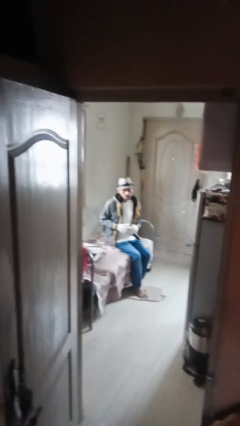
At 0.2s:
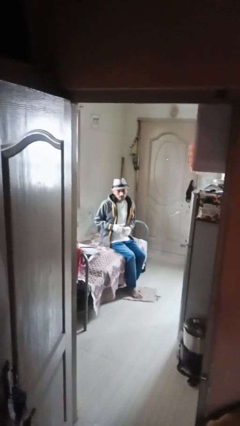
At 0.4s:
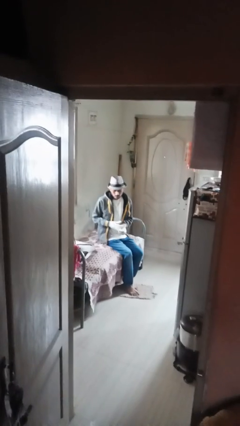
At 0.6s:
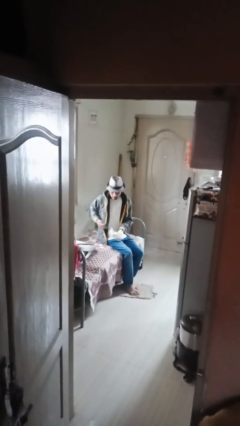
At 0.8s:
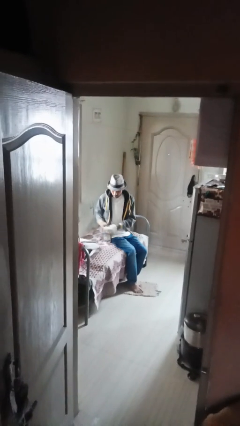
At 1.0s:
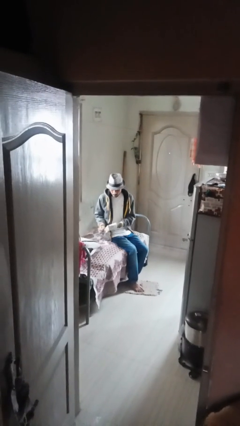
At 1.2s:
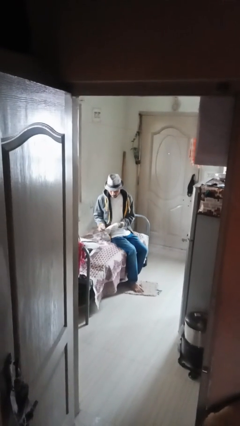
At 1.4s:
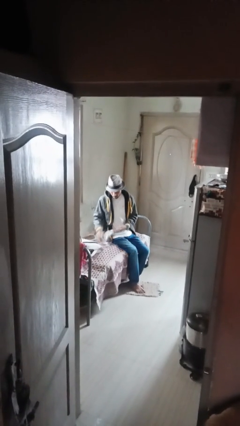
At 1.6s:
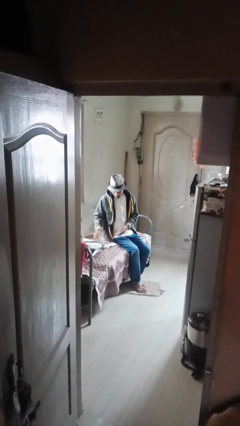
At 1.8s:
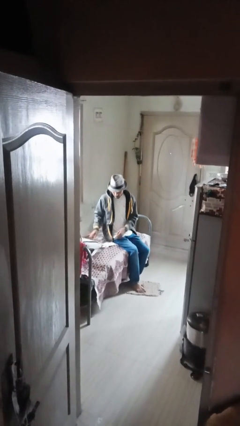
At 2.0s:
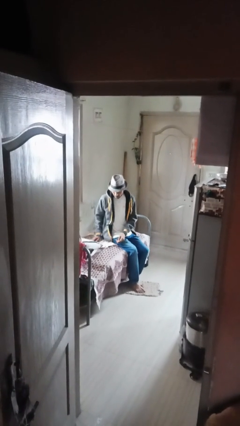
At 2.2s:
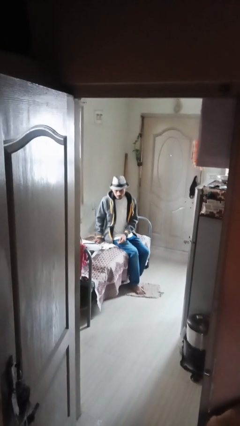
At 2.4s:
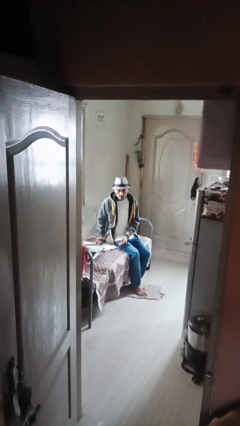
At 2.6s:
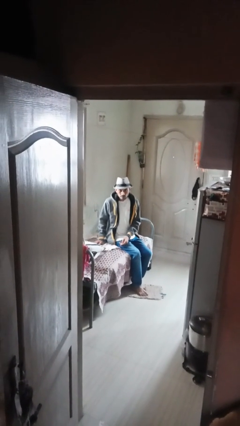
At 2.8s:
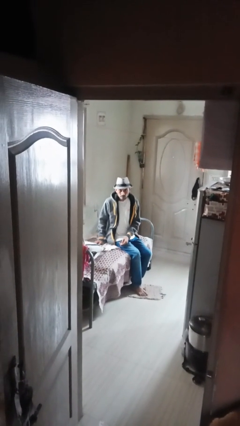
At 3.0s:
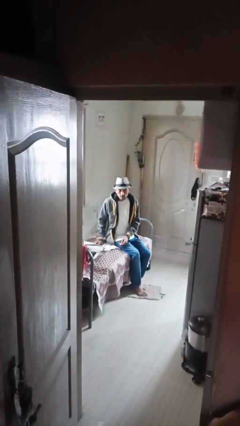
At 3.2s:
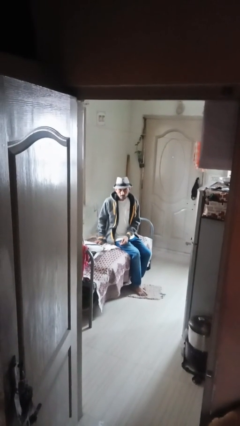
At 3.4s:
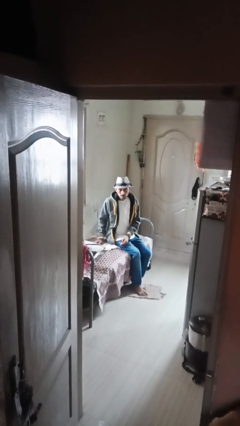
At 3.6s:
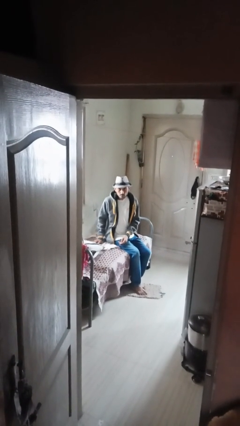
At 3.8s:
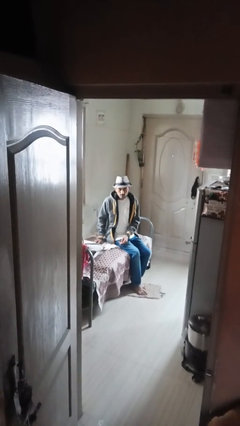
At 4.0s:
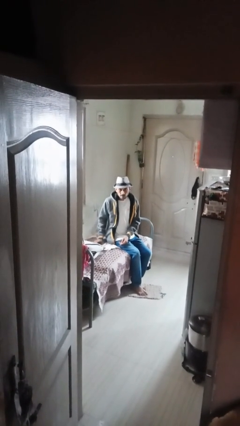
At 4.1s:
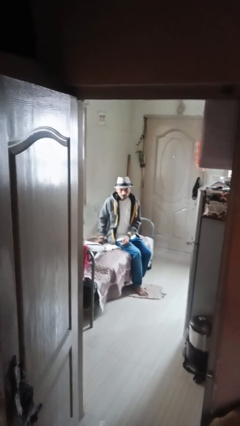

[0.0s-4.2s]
person takes off gloves

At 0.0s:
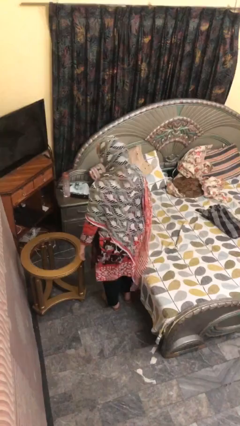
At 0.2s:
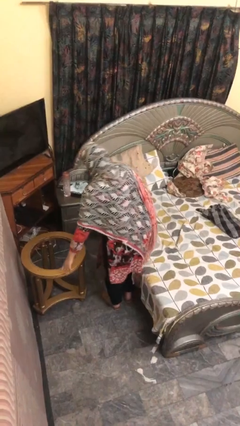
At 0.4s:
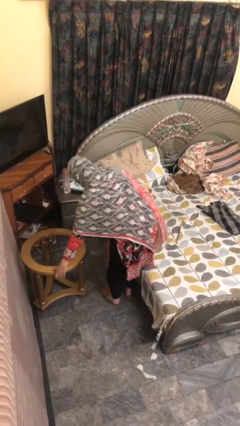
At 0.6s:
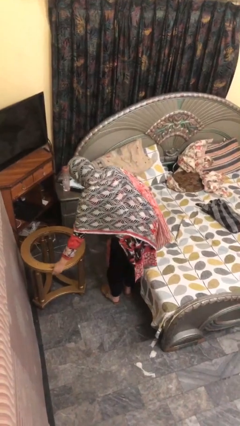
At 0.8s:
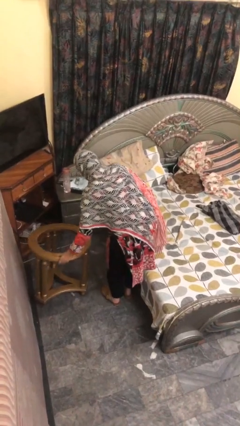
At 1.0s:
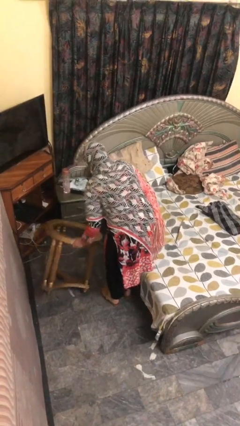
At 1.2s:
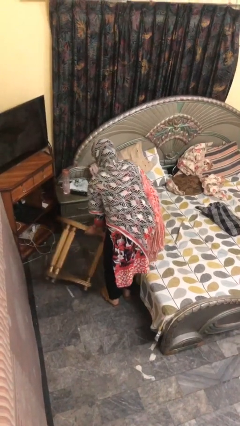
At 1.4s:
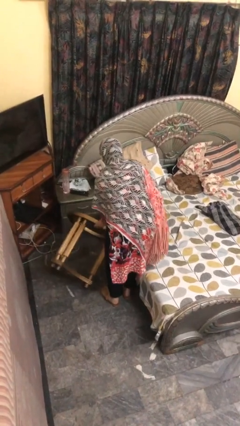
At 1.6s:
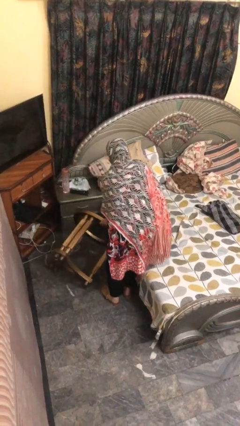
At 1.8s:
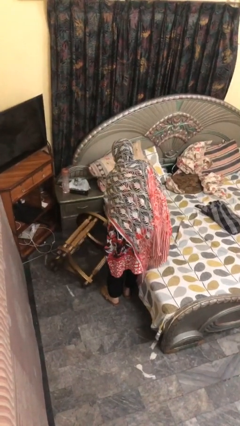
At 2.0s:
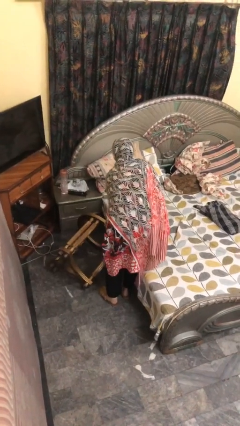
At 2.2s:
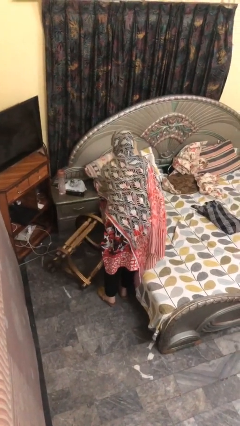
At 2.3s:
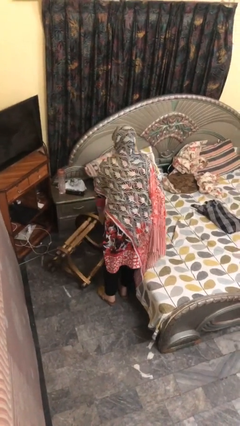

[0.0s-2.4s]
person knocks over furniture

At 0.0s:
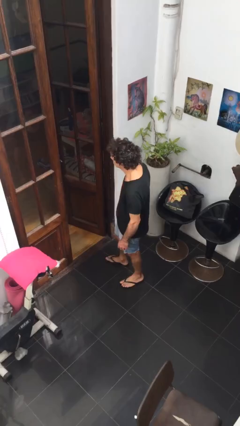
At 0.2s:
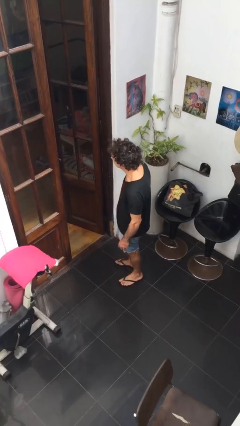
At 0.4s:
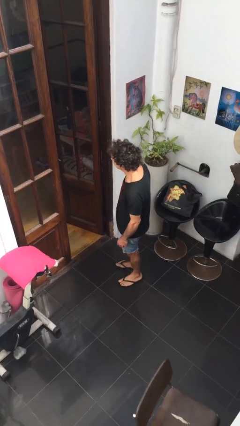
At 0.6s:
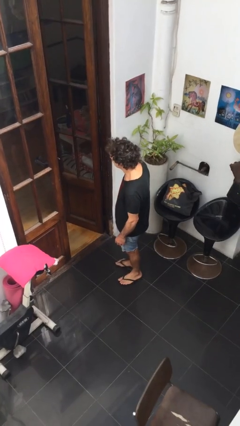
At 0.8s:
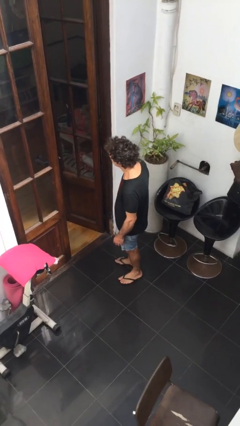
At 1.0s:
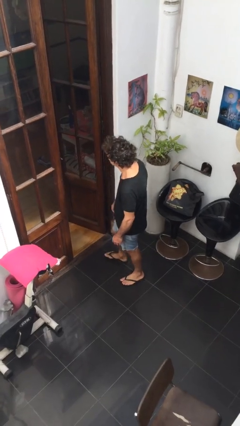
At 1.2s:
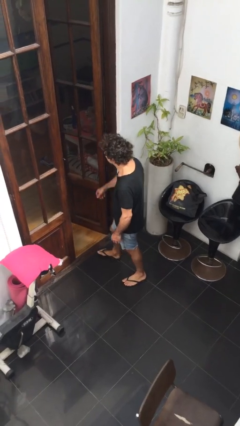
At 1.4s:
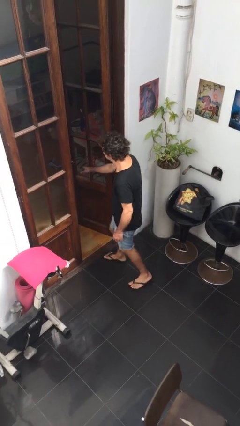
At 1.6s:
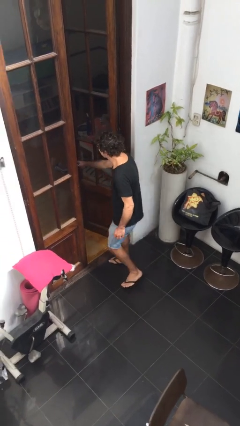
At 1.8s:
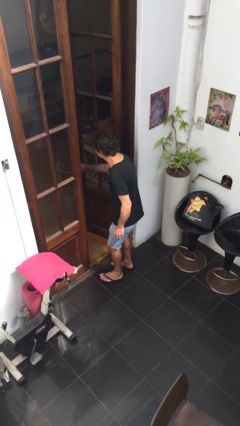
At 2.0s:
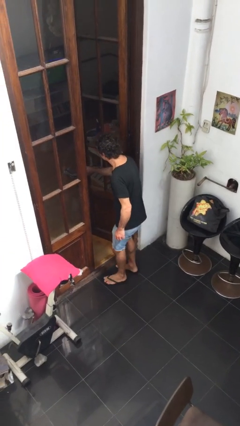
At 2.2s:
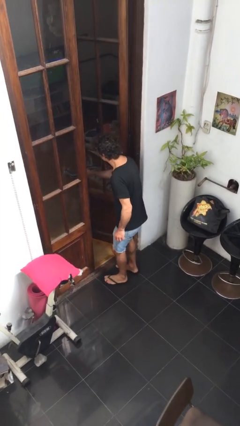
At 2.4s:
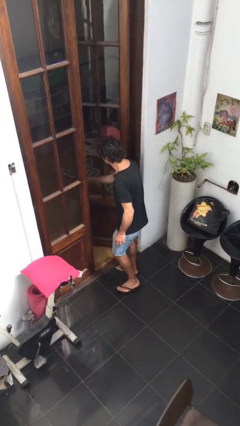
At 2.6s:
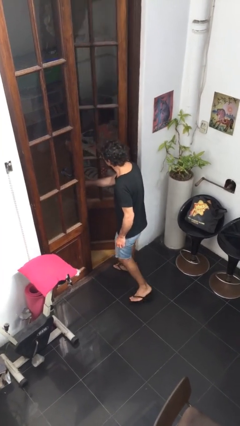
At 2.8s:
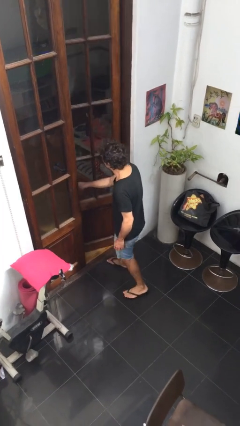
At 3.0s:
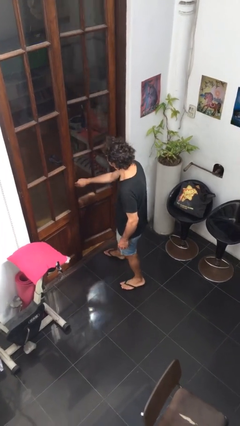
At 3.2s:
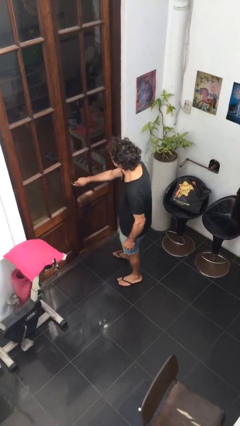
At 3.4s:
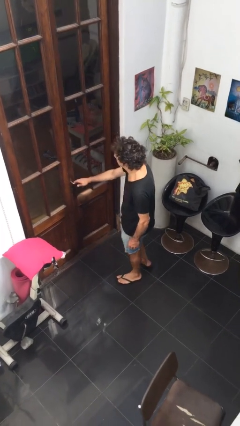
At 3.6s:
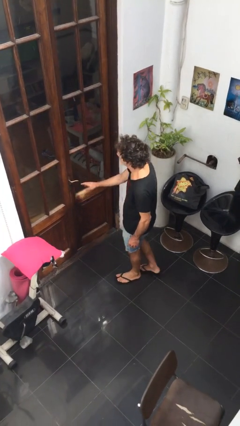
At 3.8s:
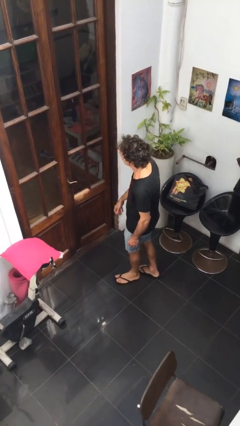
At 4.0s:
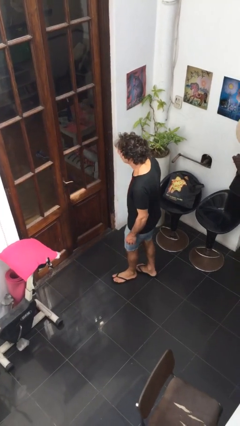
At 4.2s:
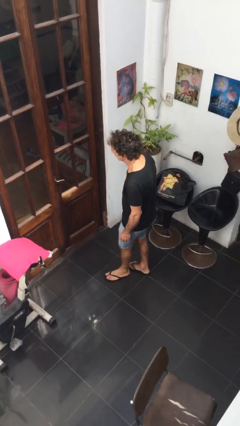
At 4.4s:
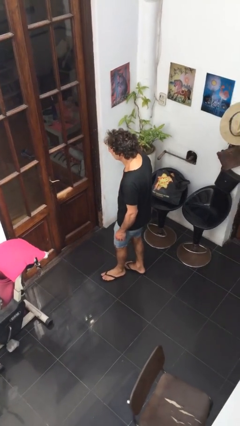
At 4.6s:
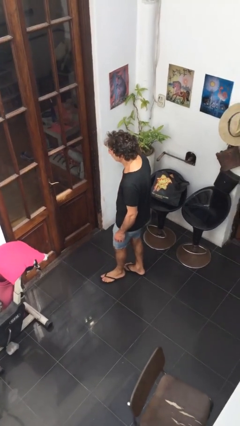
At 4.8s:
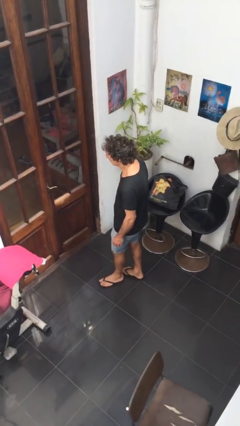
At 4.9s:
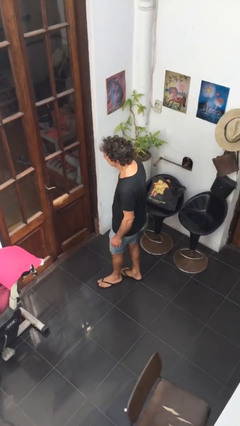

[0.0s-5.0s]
person closes facility door

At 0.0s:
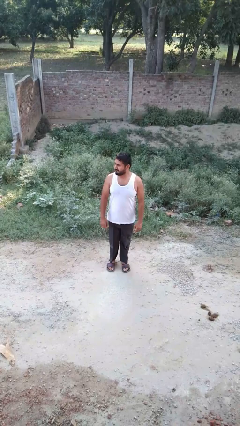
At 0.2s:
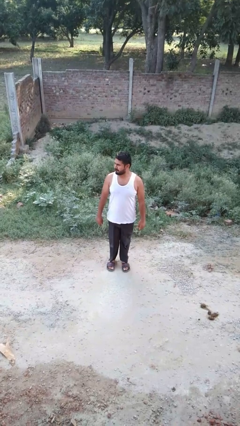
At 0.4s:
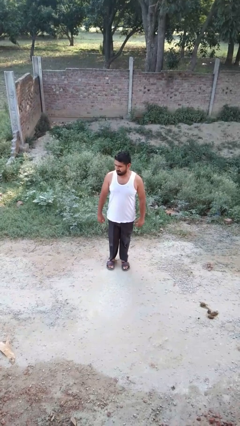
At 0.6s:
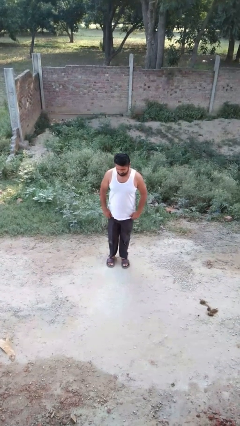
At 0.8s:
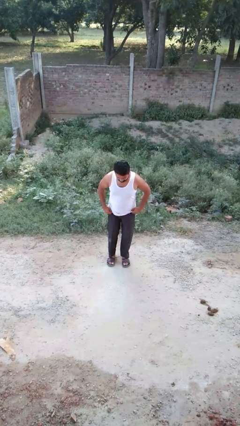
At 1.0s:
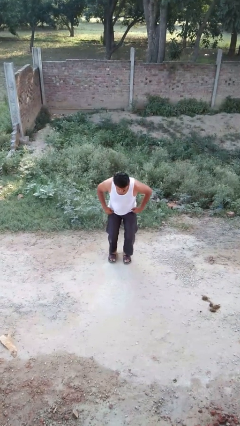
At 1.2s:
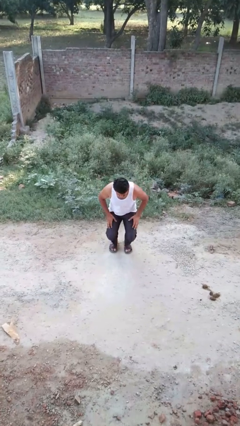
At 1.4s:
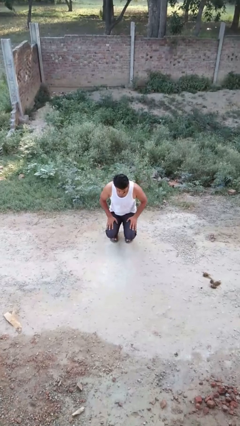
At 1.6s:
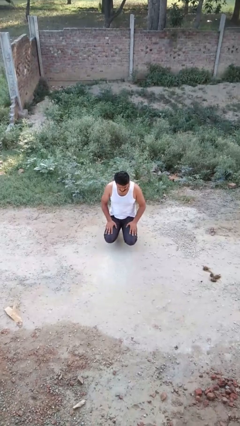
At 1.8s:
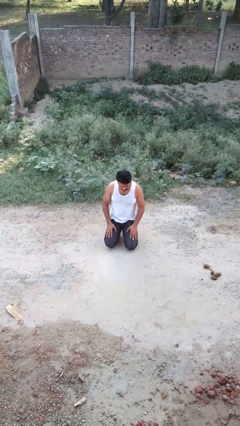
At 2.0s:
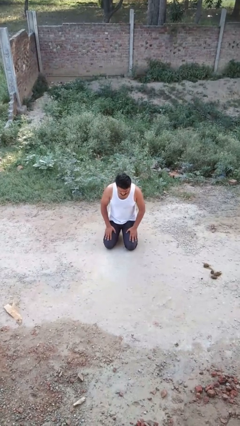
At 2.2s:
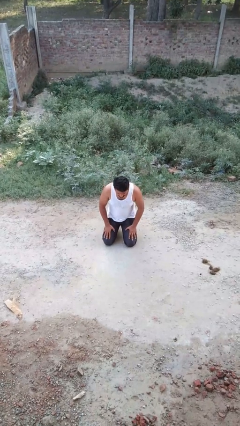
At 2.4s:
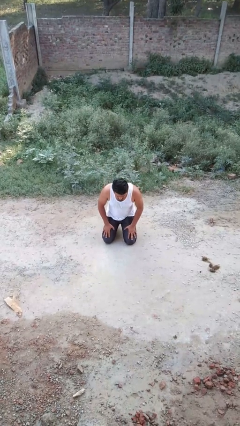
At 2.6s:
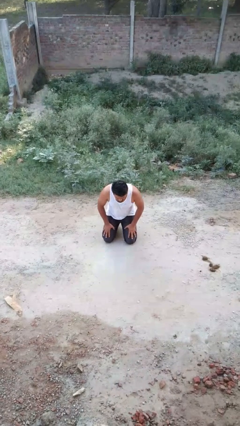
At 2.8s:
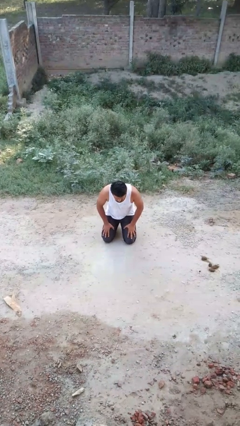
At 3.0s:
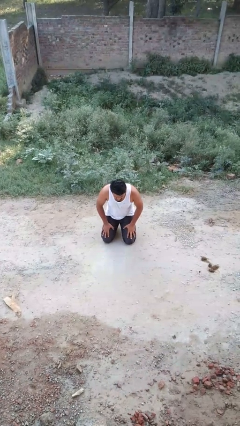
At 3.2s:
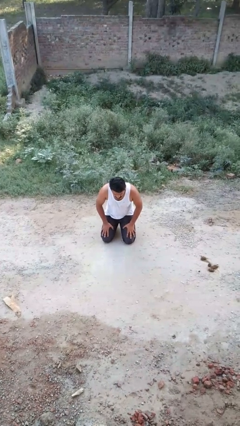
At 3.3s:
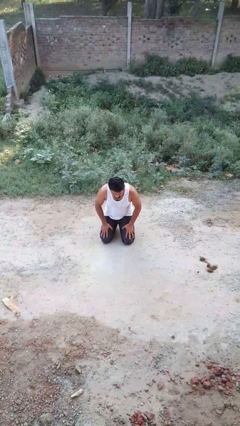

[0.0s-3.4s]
person kneels

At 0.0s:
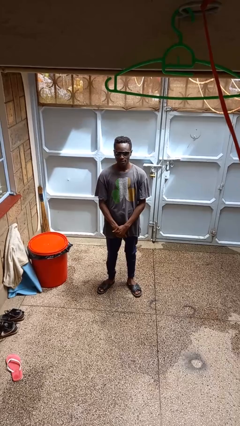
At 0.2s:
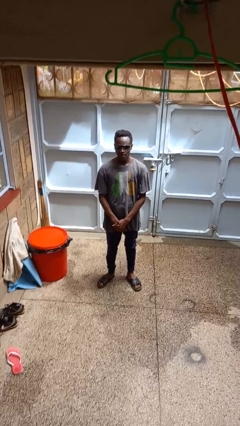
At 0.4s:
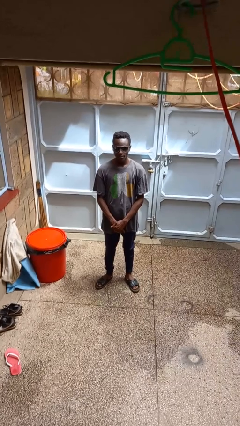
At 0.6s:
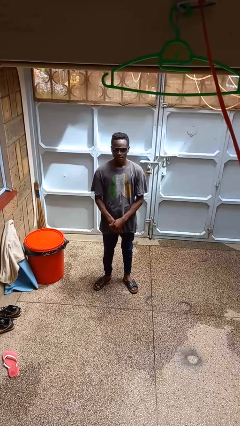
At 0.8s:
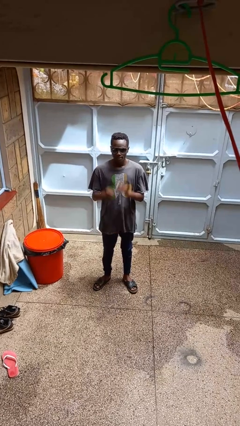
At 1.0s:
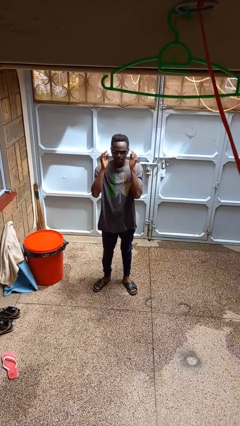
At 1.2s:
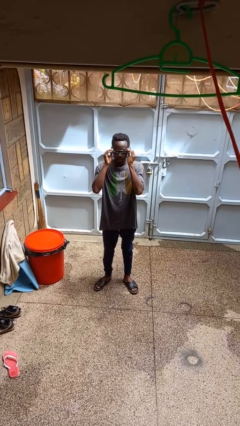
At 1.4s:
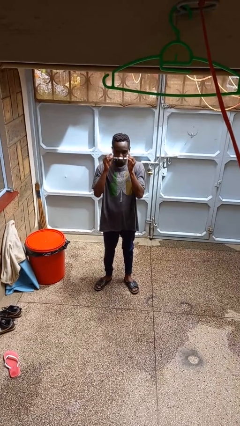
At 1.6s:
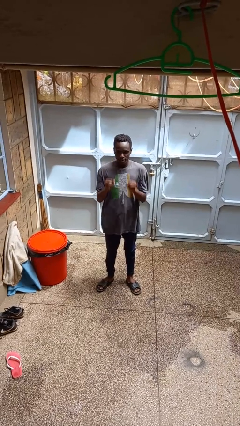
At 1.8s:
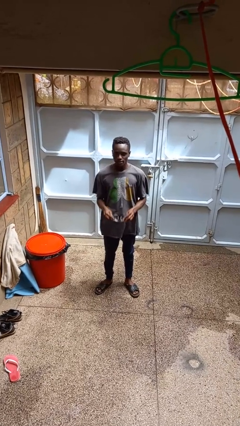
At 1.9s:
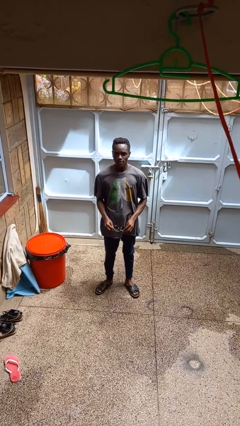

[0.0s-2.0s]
person takes off sunglasses

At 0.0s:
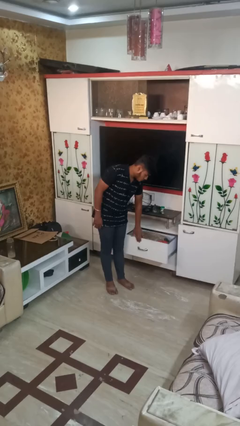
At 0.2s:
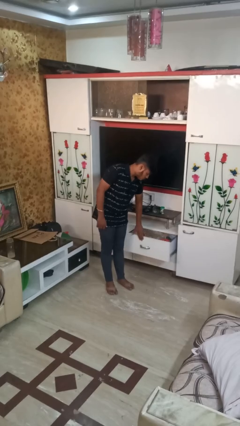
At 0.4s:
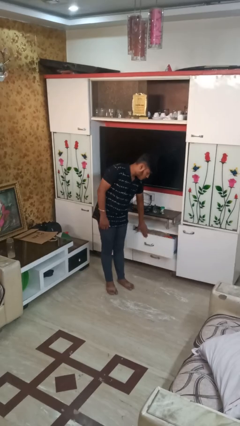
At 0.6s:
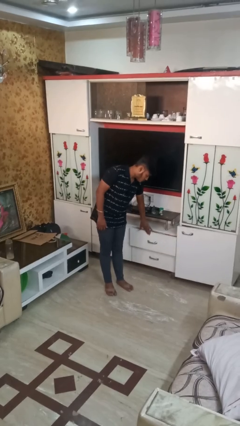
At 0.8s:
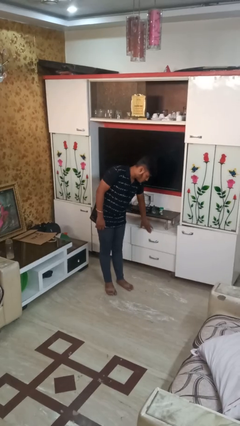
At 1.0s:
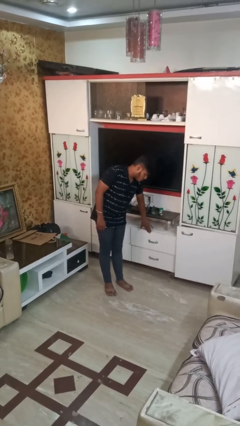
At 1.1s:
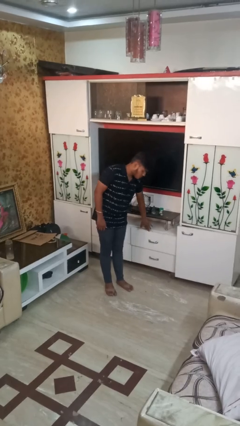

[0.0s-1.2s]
person closes dresser drawer
